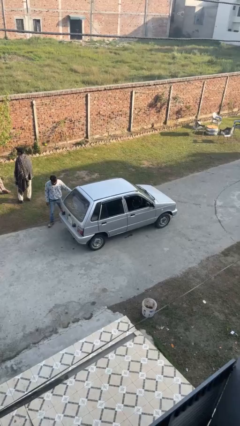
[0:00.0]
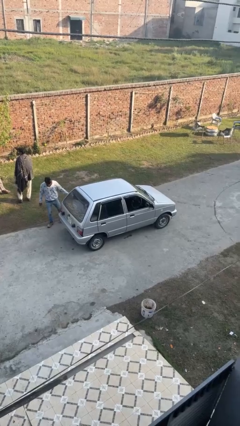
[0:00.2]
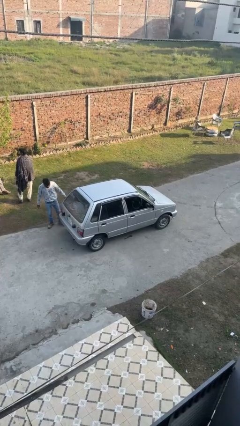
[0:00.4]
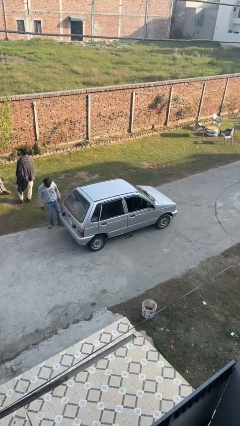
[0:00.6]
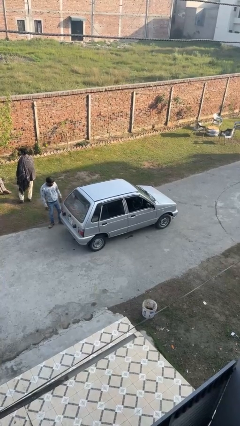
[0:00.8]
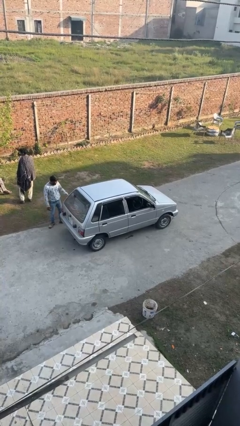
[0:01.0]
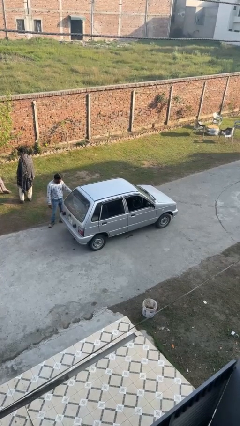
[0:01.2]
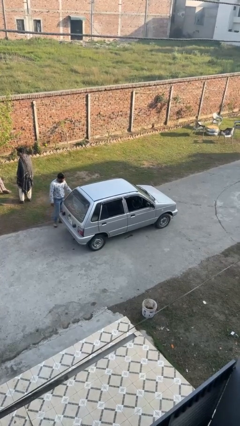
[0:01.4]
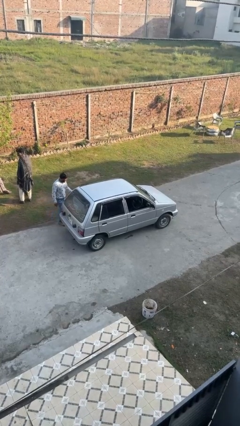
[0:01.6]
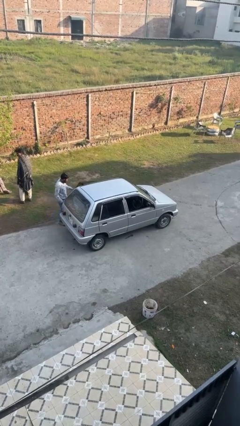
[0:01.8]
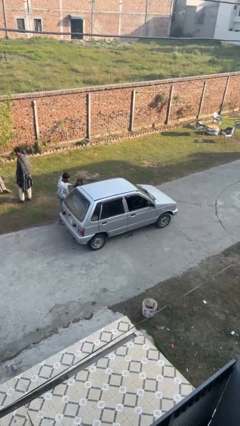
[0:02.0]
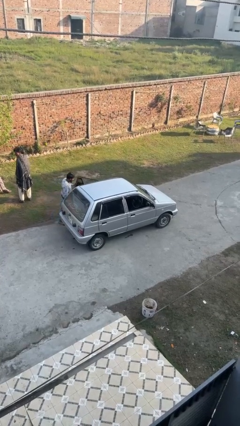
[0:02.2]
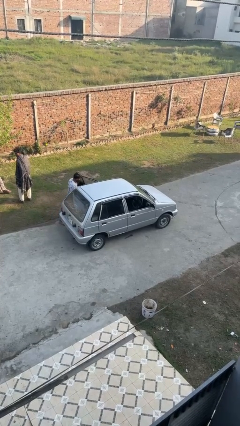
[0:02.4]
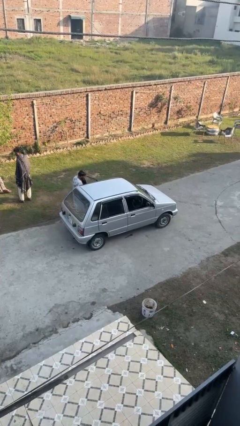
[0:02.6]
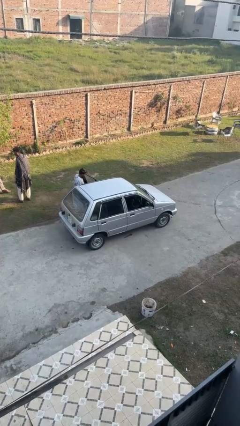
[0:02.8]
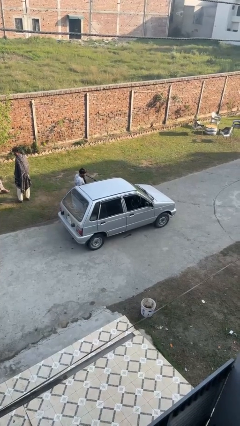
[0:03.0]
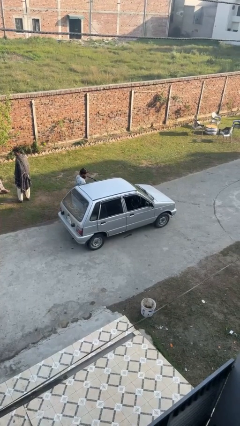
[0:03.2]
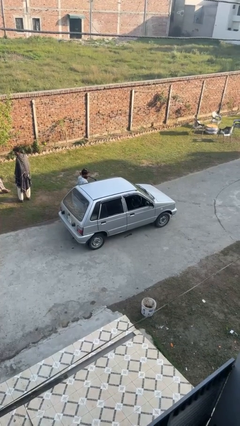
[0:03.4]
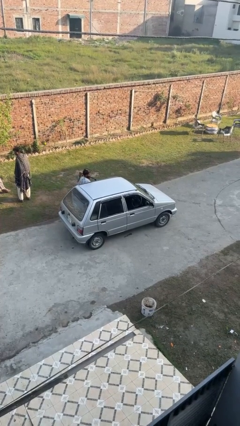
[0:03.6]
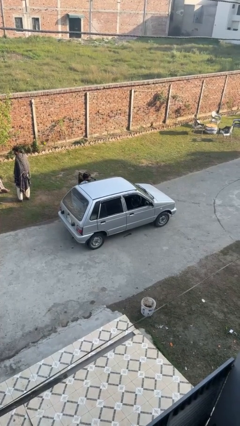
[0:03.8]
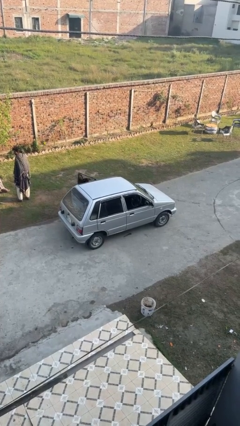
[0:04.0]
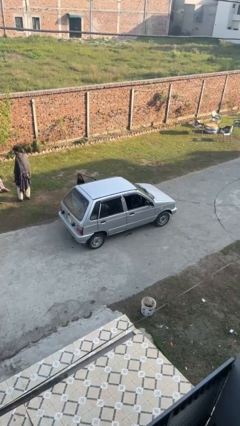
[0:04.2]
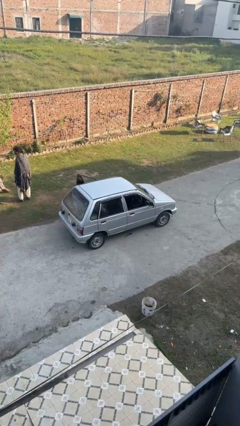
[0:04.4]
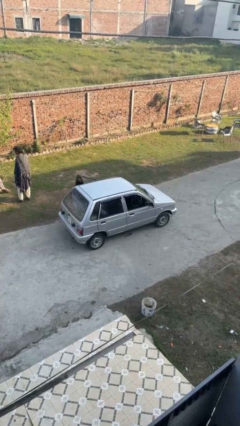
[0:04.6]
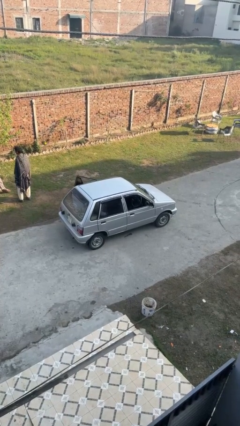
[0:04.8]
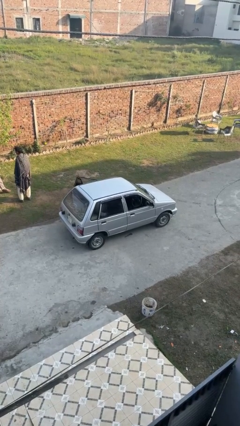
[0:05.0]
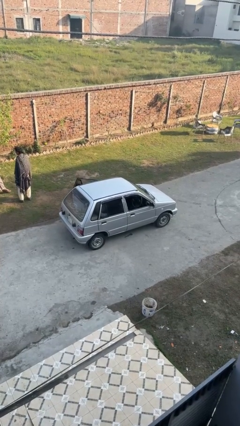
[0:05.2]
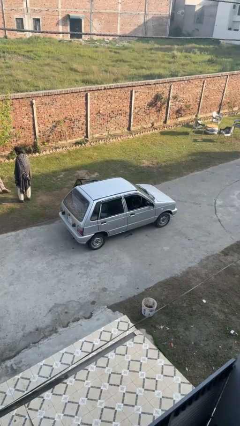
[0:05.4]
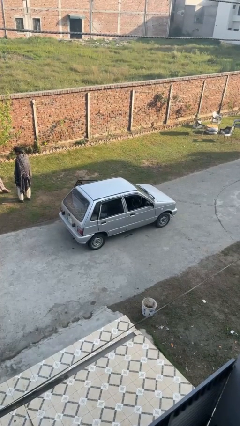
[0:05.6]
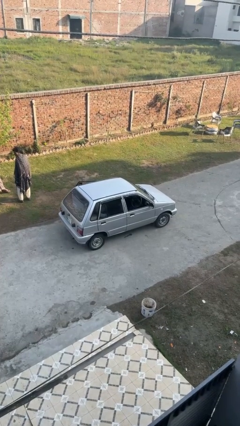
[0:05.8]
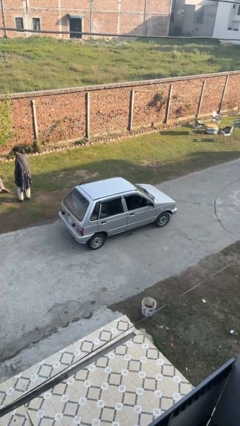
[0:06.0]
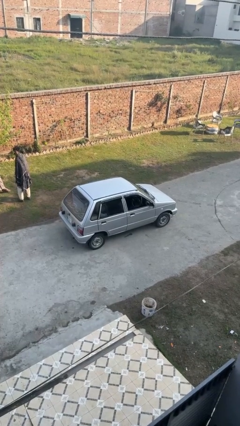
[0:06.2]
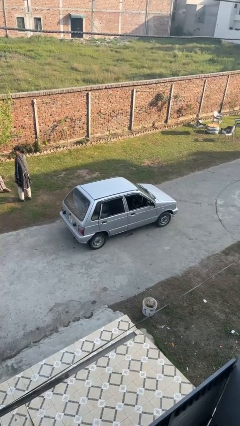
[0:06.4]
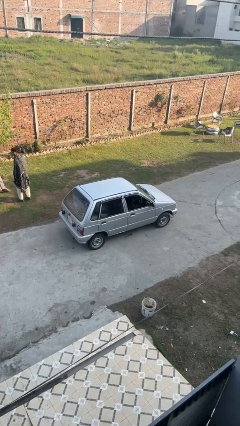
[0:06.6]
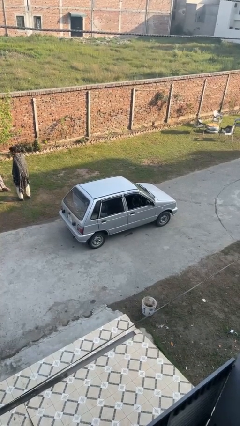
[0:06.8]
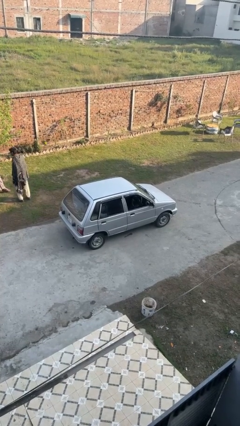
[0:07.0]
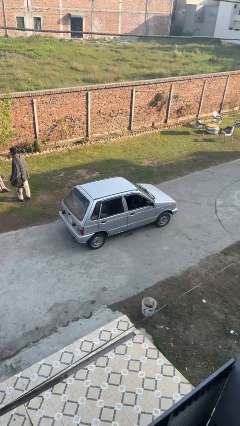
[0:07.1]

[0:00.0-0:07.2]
car picks up person

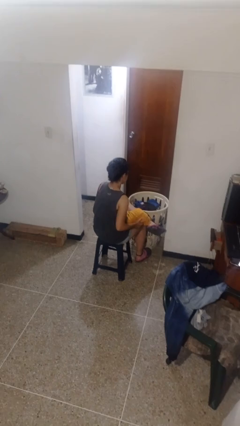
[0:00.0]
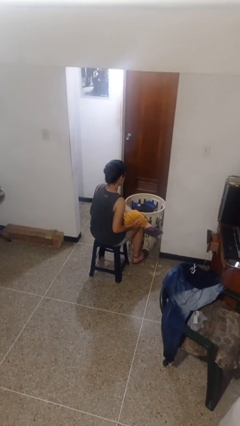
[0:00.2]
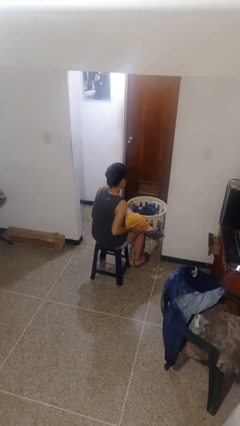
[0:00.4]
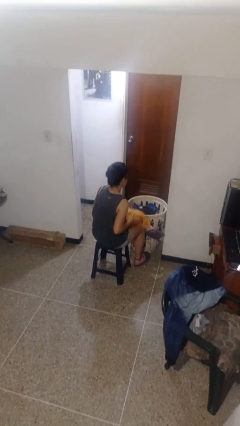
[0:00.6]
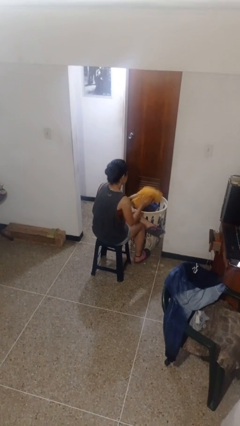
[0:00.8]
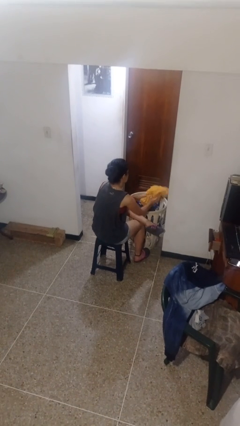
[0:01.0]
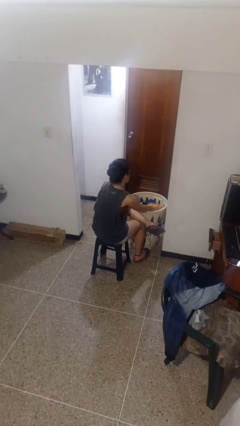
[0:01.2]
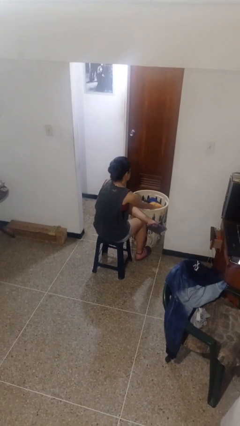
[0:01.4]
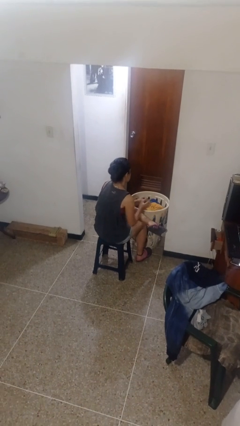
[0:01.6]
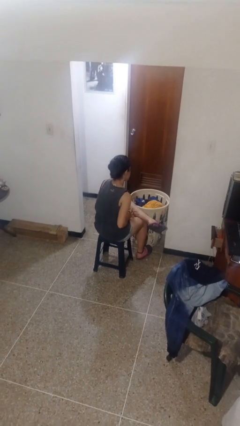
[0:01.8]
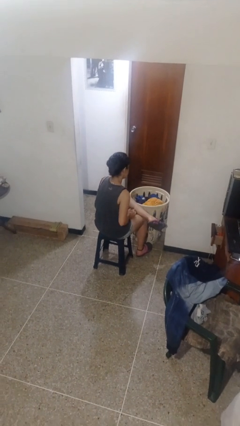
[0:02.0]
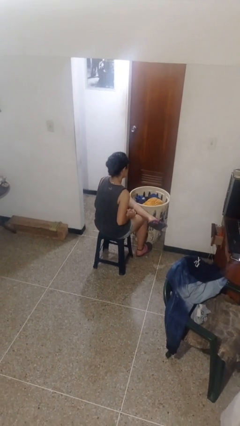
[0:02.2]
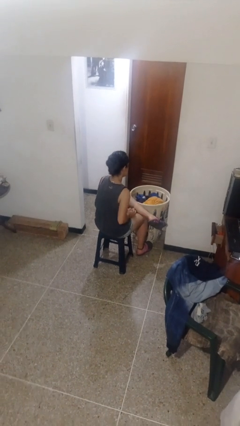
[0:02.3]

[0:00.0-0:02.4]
person puts object into basket

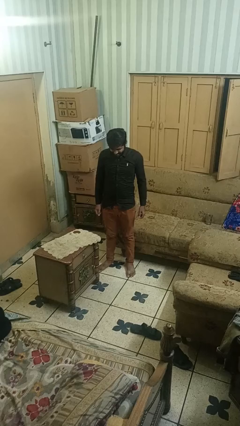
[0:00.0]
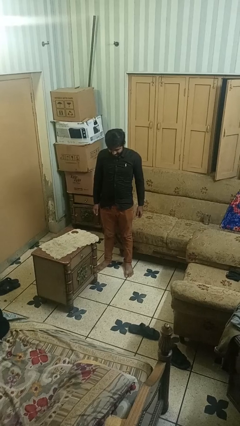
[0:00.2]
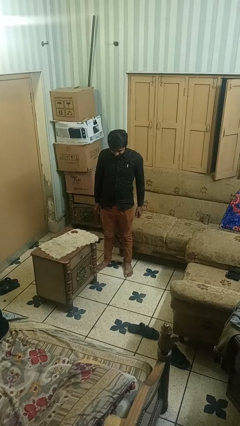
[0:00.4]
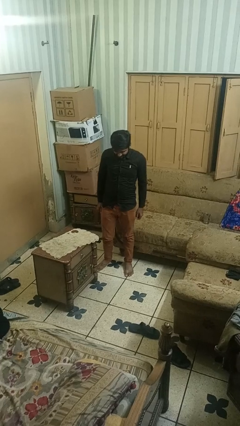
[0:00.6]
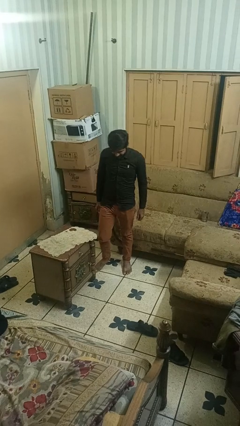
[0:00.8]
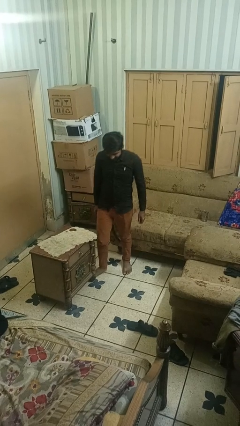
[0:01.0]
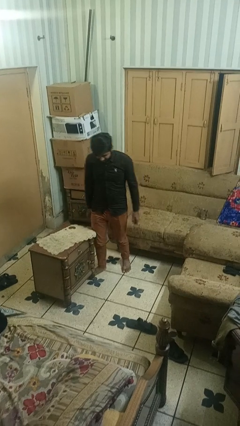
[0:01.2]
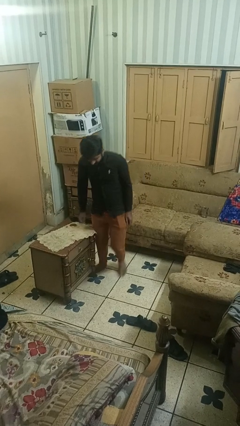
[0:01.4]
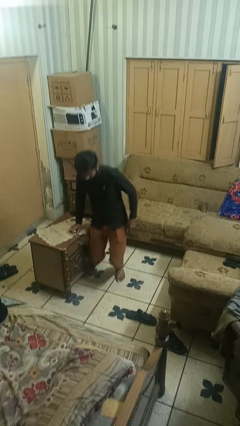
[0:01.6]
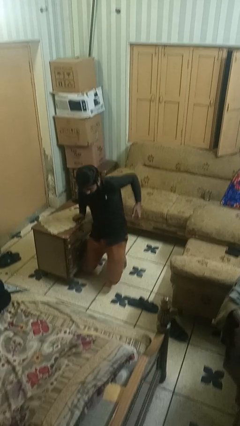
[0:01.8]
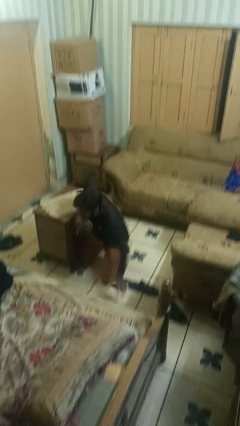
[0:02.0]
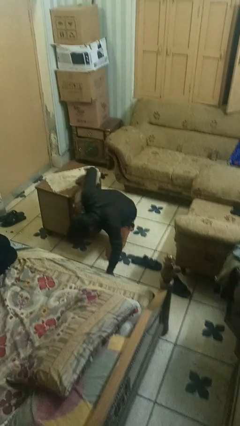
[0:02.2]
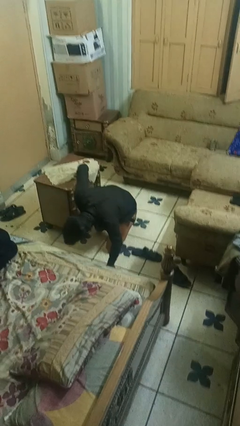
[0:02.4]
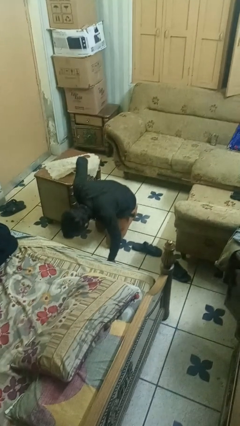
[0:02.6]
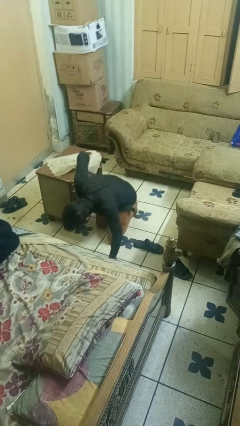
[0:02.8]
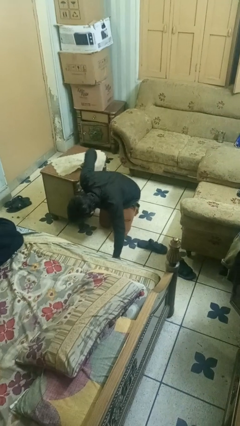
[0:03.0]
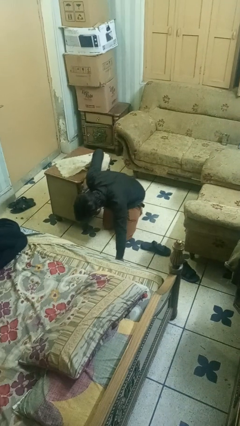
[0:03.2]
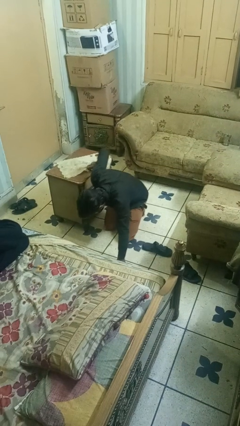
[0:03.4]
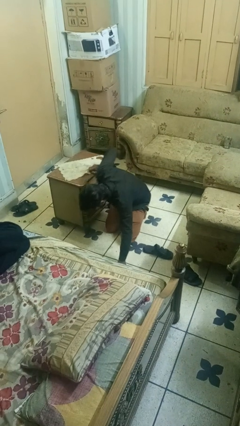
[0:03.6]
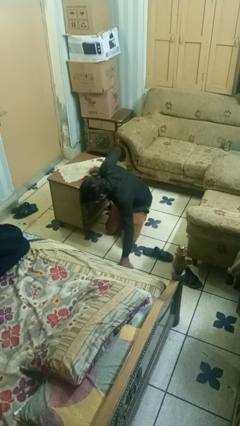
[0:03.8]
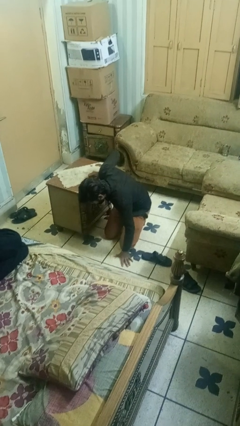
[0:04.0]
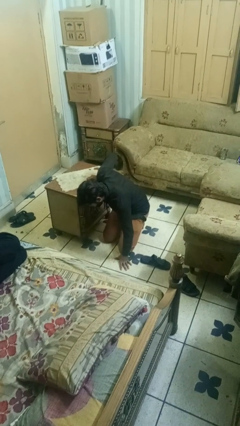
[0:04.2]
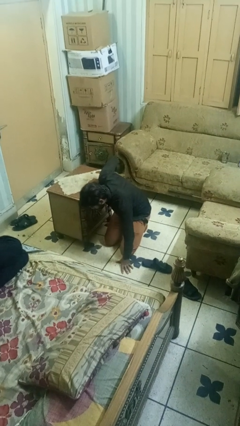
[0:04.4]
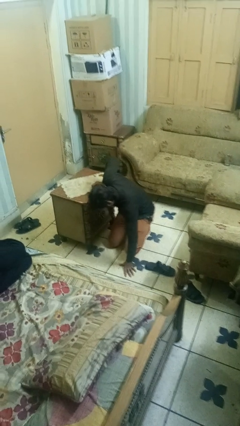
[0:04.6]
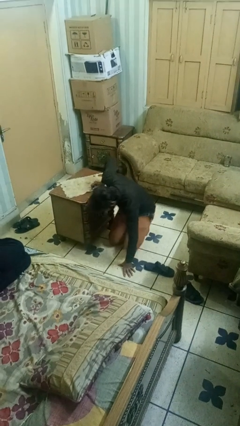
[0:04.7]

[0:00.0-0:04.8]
person bumps into table

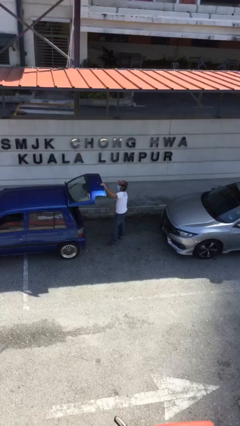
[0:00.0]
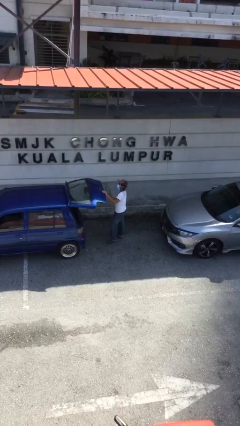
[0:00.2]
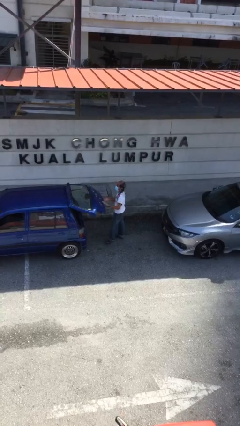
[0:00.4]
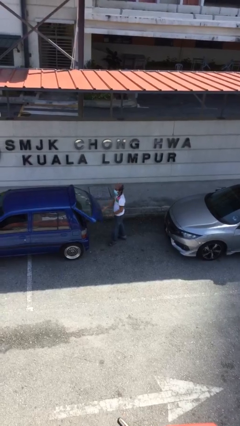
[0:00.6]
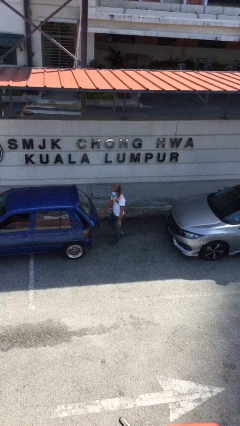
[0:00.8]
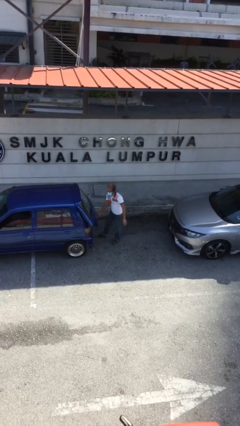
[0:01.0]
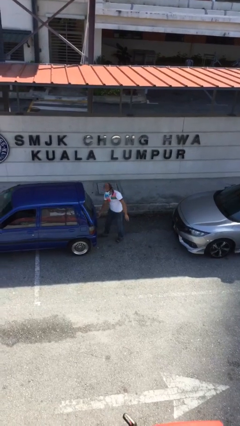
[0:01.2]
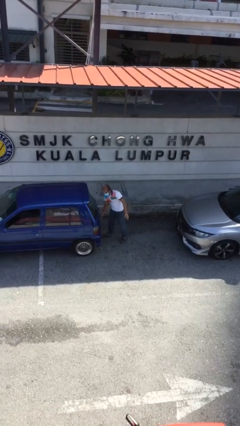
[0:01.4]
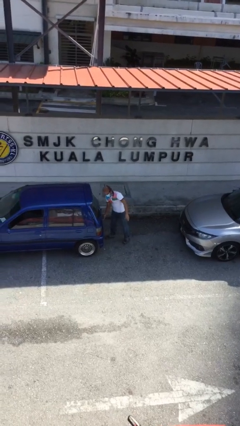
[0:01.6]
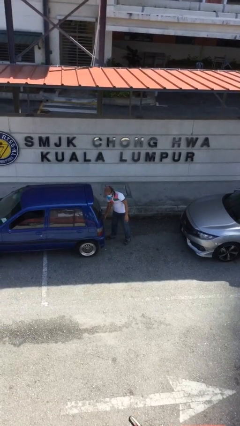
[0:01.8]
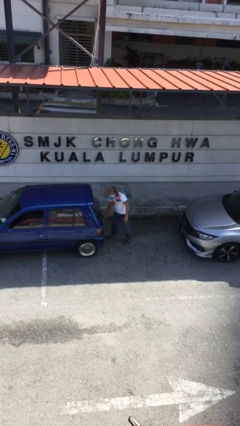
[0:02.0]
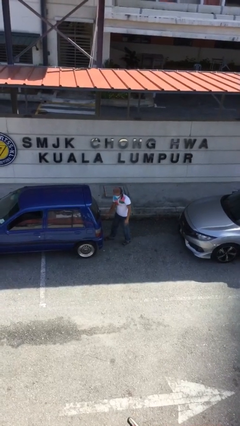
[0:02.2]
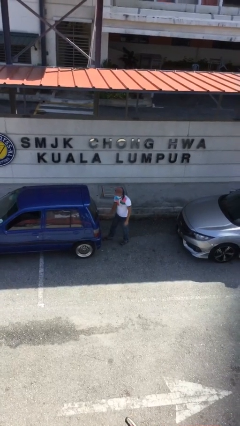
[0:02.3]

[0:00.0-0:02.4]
person closes car trunk

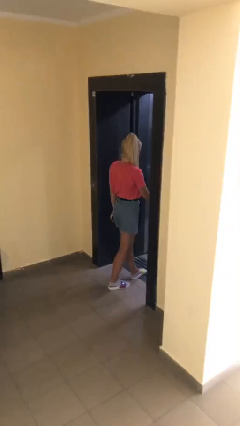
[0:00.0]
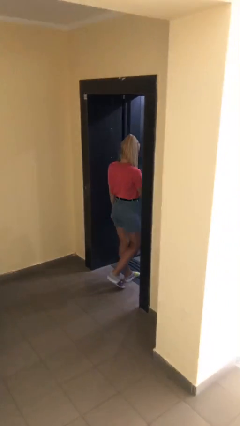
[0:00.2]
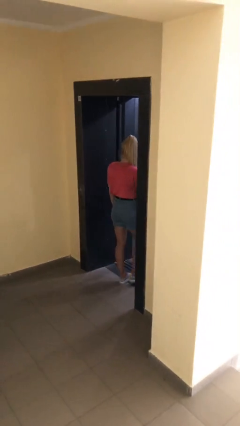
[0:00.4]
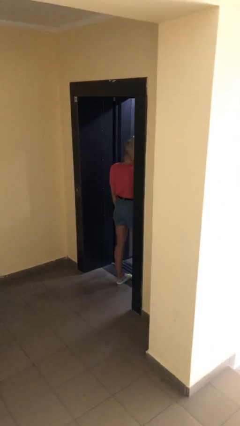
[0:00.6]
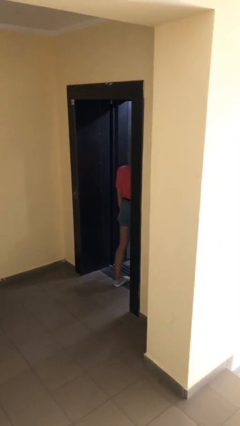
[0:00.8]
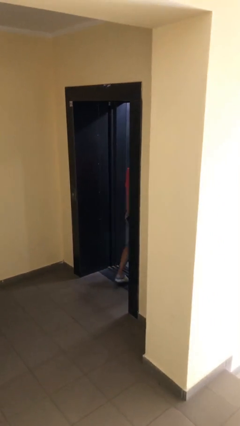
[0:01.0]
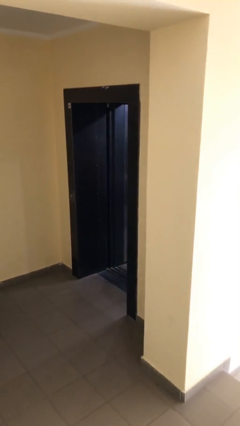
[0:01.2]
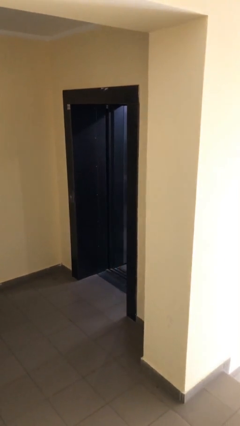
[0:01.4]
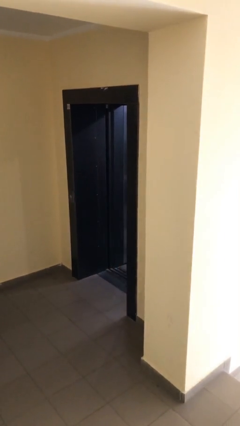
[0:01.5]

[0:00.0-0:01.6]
person exits scene through structure
